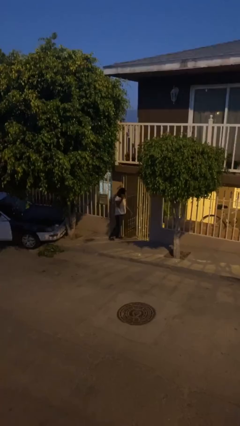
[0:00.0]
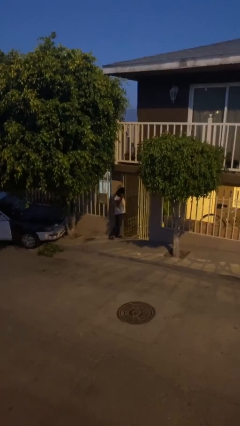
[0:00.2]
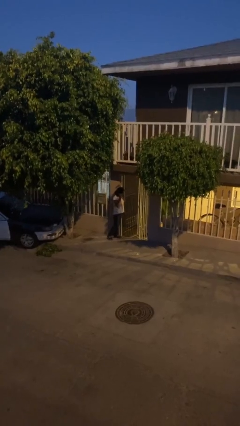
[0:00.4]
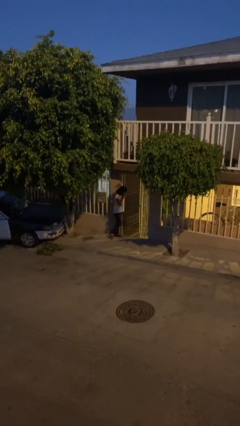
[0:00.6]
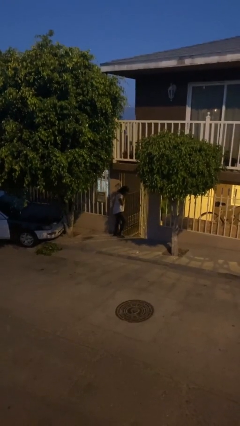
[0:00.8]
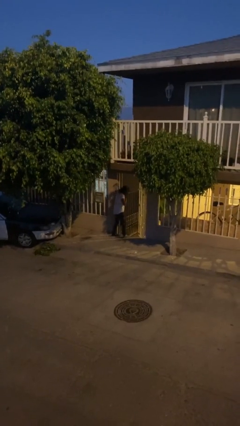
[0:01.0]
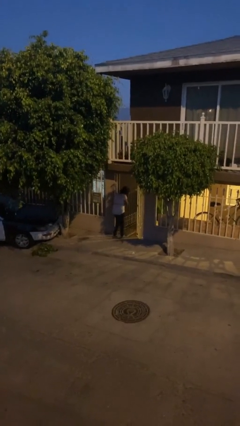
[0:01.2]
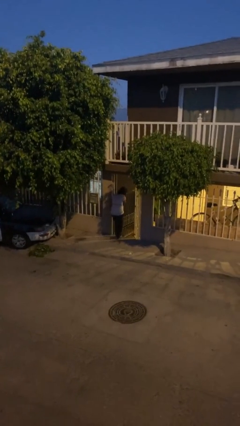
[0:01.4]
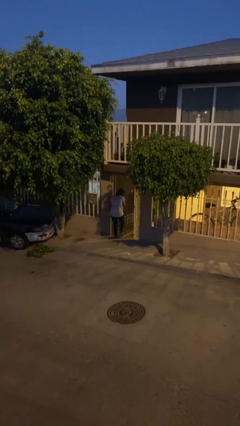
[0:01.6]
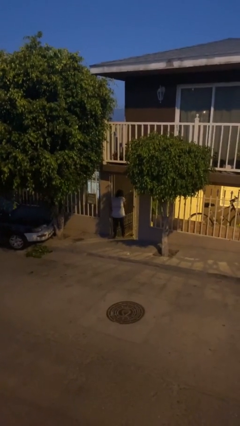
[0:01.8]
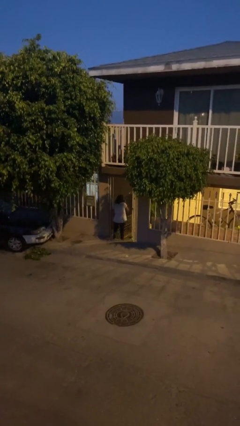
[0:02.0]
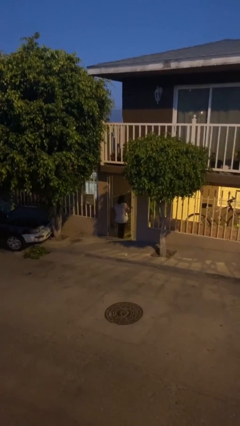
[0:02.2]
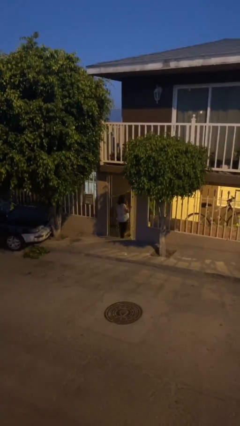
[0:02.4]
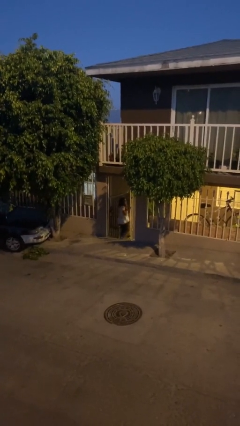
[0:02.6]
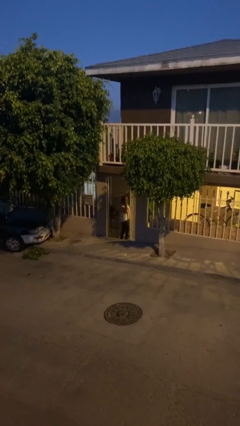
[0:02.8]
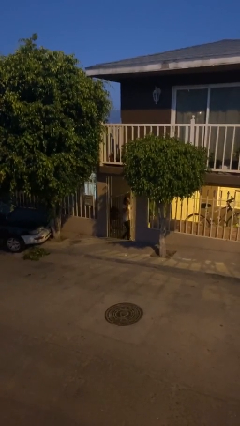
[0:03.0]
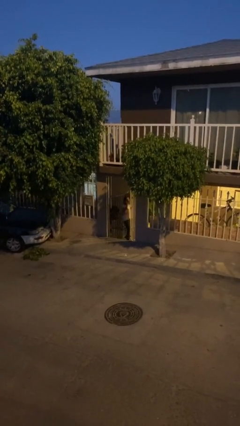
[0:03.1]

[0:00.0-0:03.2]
person exits scene through structure

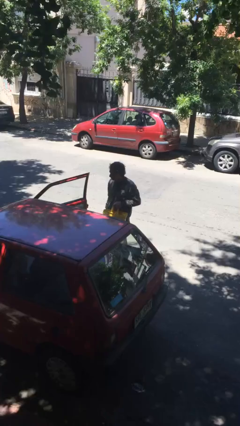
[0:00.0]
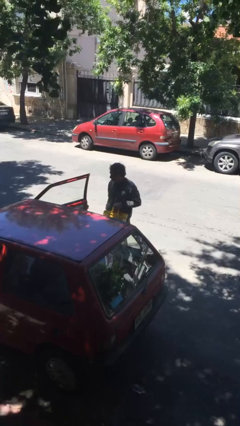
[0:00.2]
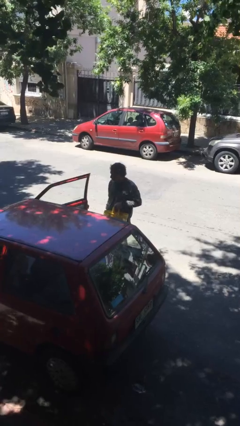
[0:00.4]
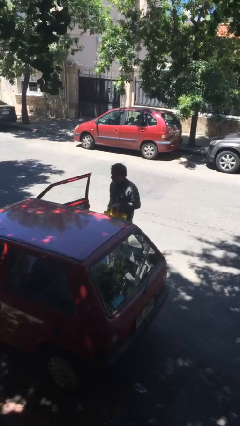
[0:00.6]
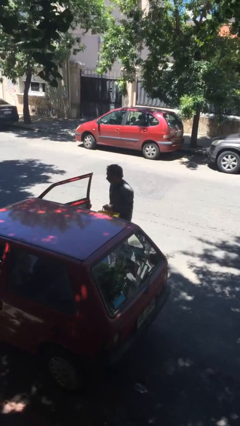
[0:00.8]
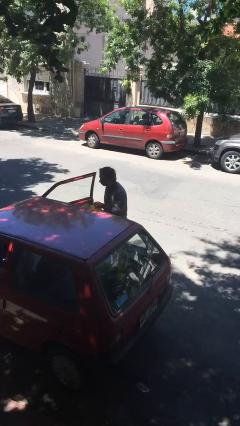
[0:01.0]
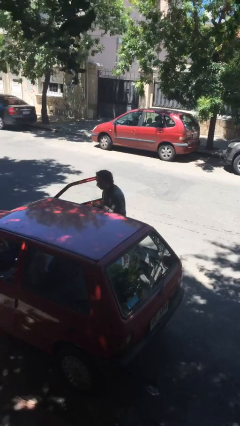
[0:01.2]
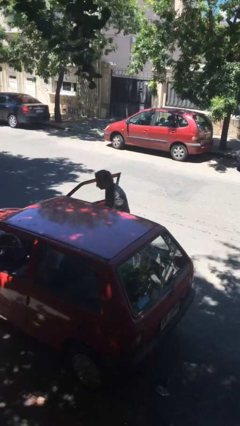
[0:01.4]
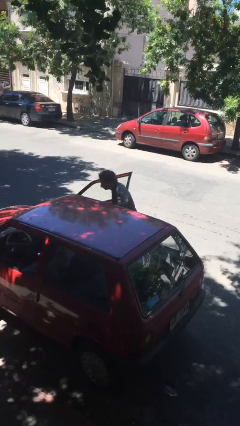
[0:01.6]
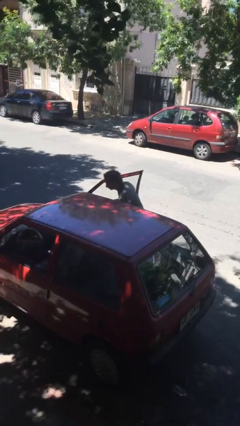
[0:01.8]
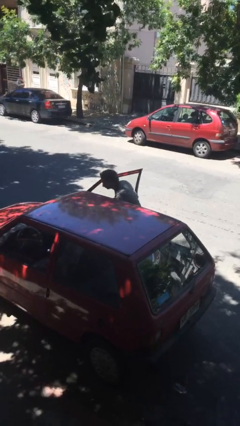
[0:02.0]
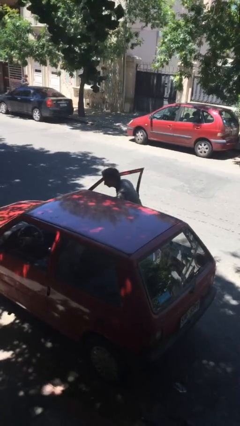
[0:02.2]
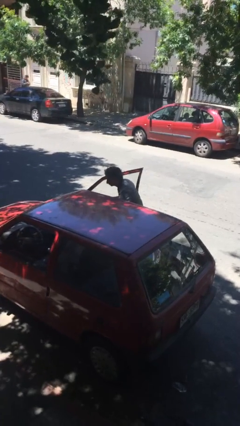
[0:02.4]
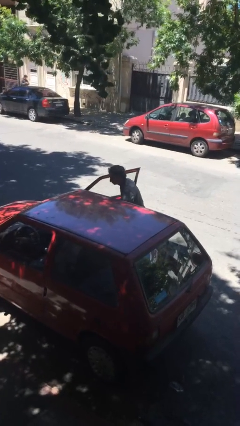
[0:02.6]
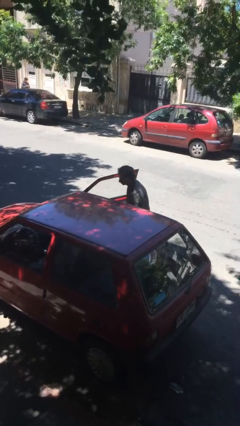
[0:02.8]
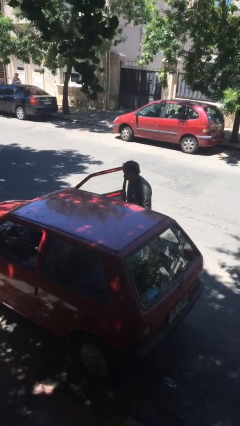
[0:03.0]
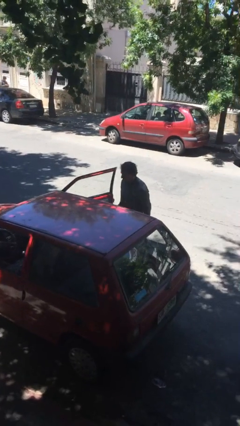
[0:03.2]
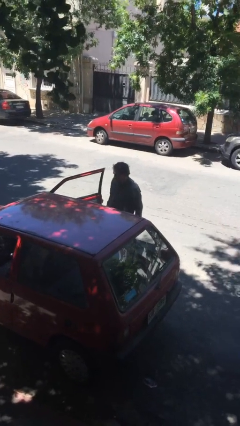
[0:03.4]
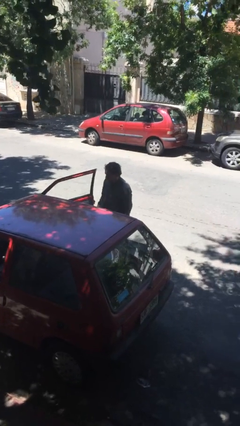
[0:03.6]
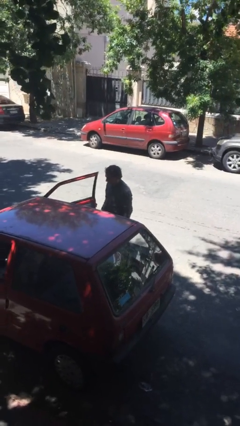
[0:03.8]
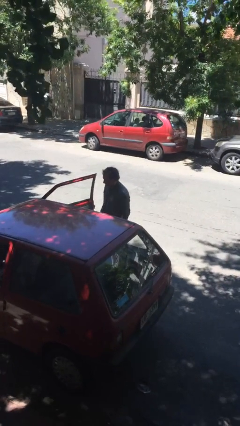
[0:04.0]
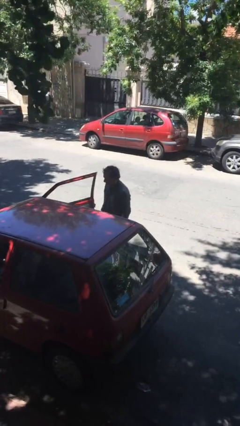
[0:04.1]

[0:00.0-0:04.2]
person loads car

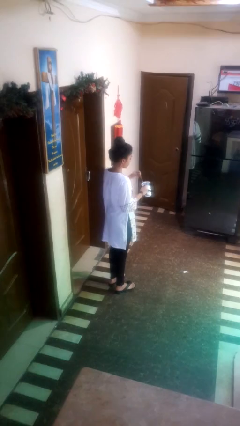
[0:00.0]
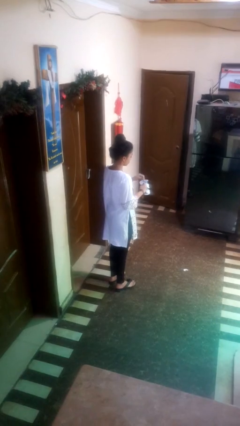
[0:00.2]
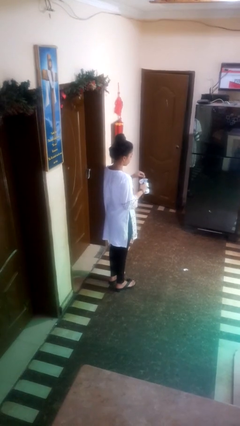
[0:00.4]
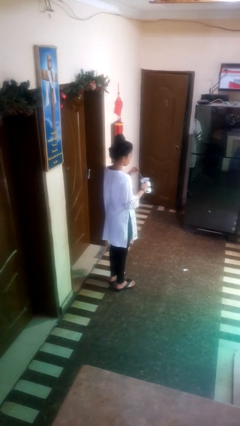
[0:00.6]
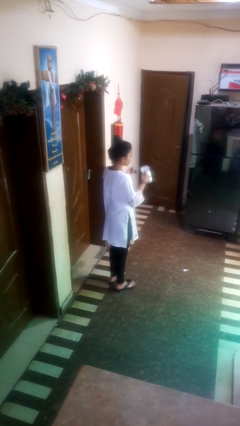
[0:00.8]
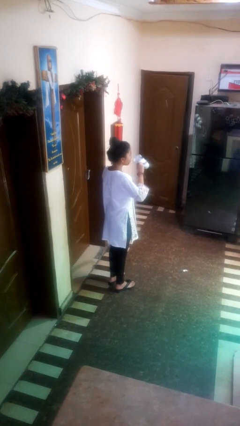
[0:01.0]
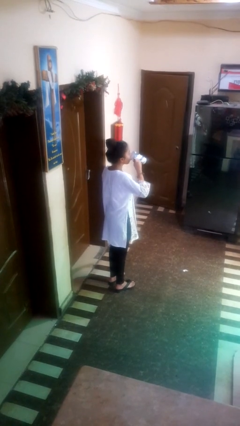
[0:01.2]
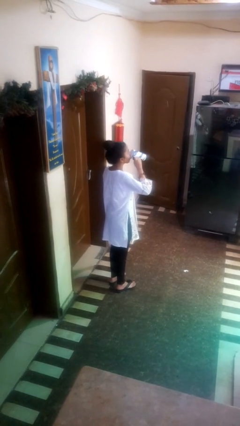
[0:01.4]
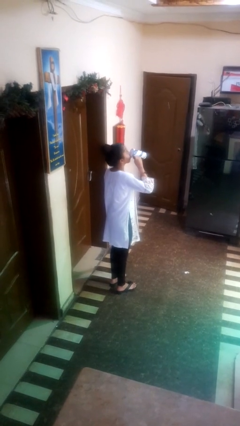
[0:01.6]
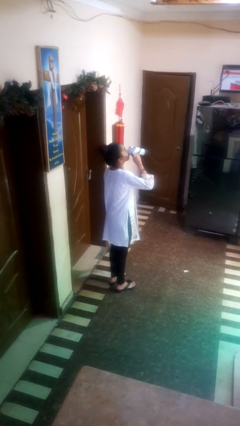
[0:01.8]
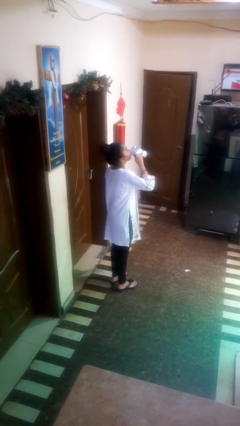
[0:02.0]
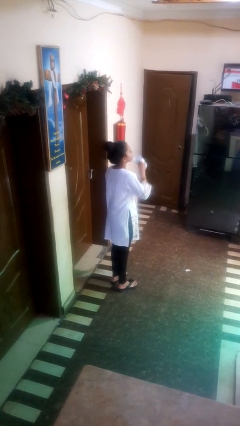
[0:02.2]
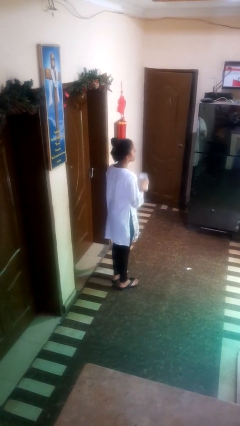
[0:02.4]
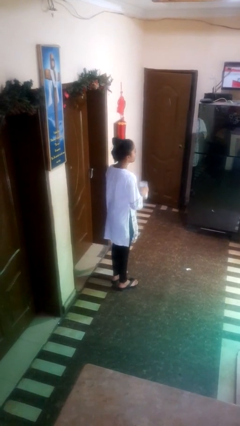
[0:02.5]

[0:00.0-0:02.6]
person drinks from mug

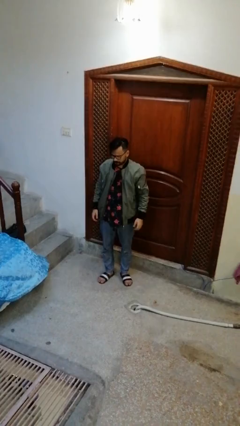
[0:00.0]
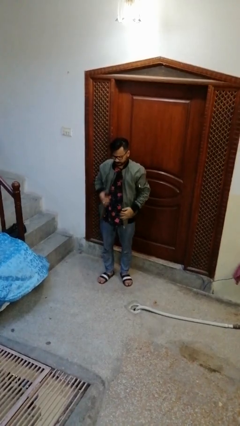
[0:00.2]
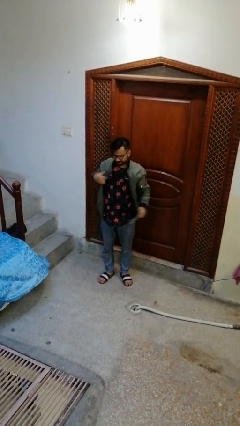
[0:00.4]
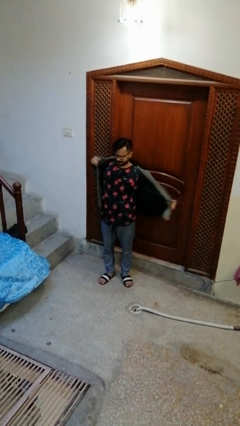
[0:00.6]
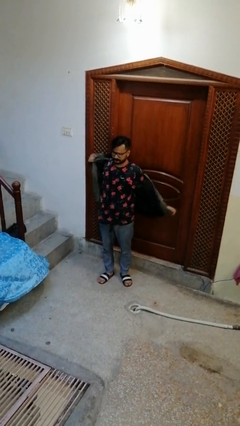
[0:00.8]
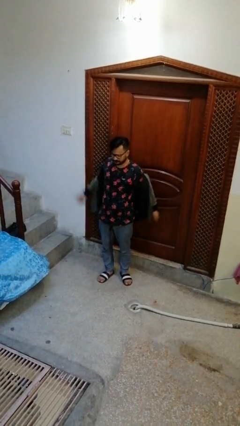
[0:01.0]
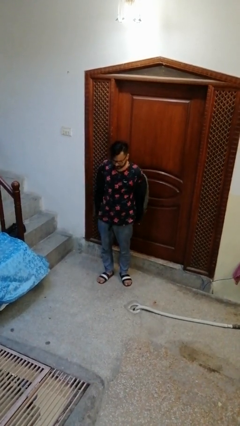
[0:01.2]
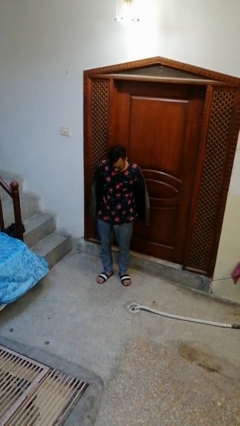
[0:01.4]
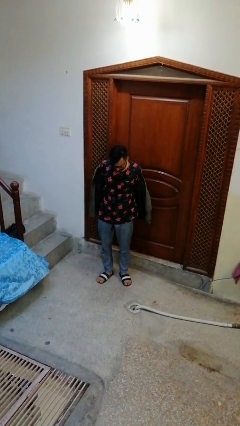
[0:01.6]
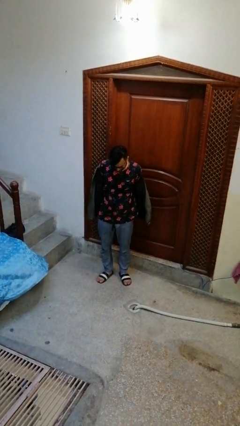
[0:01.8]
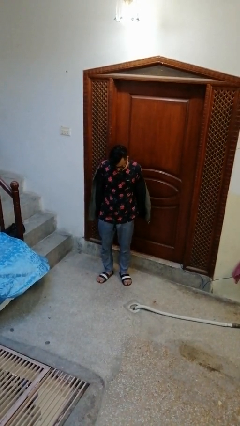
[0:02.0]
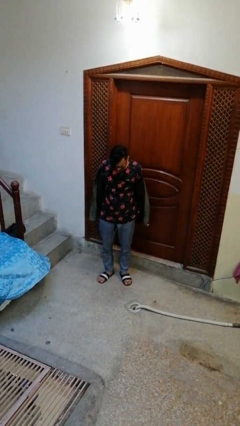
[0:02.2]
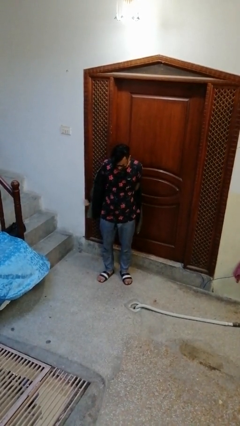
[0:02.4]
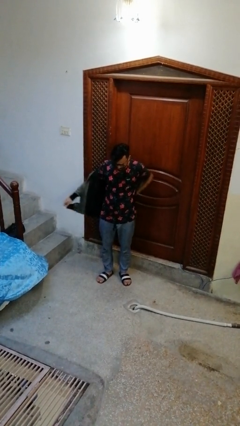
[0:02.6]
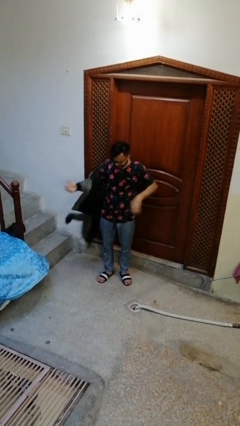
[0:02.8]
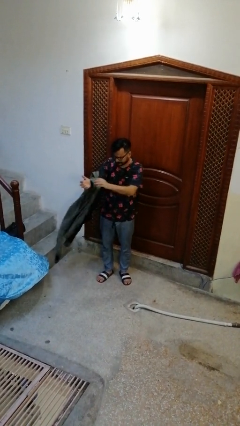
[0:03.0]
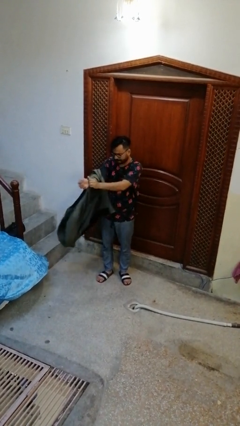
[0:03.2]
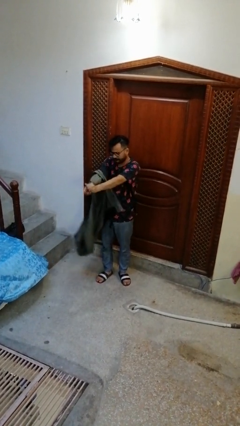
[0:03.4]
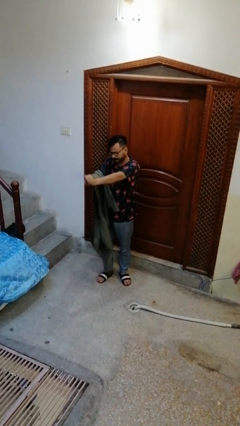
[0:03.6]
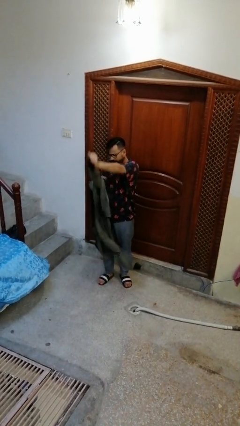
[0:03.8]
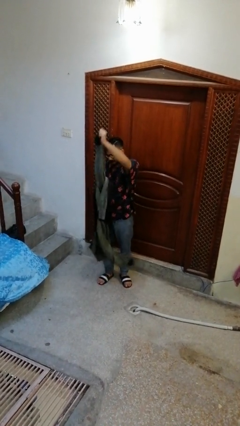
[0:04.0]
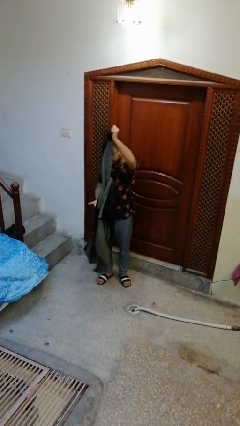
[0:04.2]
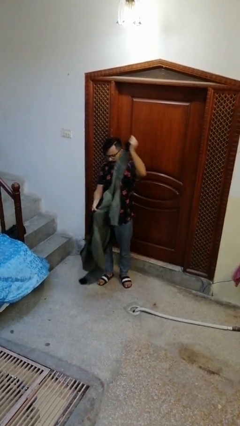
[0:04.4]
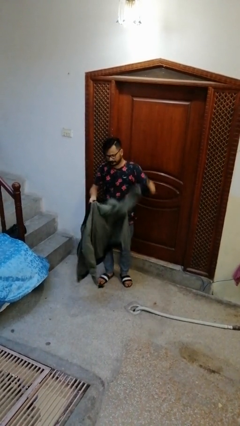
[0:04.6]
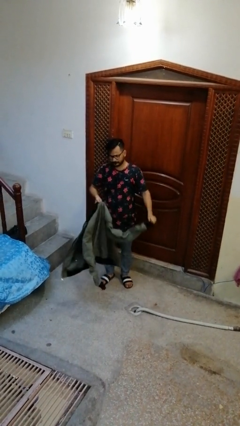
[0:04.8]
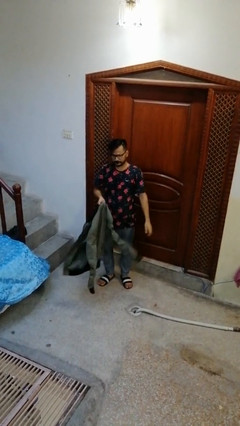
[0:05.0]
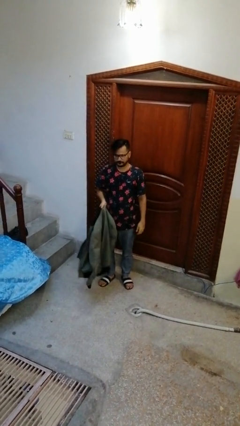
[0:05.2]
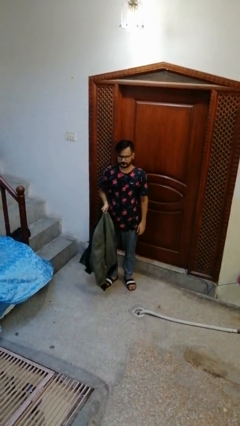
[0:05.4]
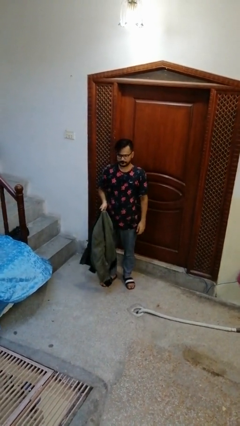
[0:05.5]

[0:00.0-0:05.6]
person takes off jacket

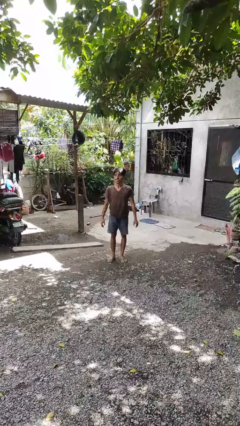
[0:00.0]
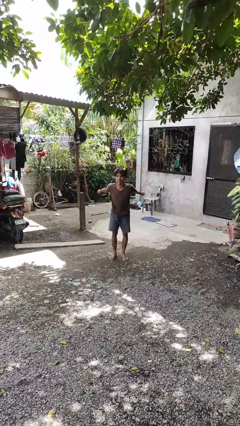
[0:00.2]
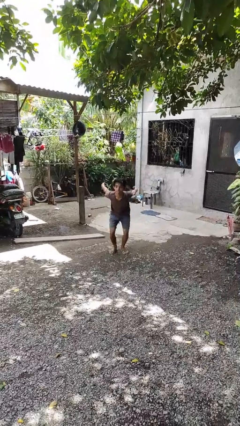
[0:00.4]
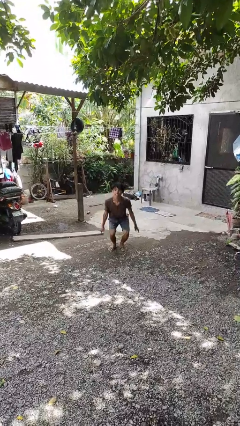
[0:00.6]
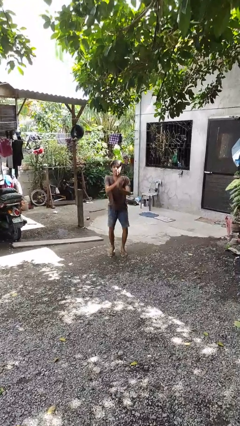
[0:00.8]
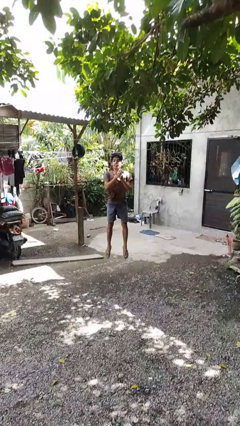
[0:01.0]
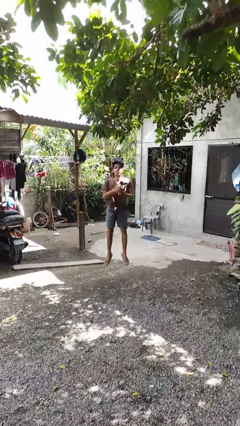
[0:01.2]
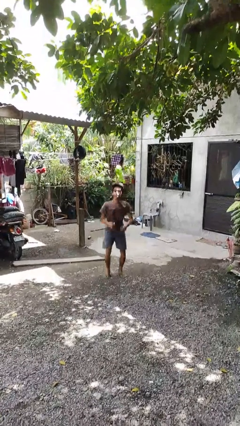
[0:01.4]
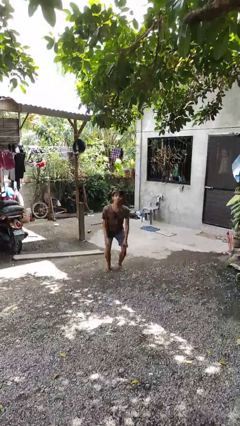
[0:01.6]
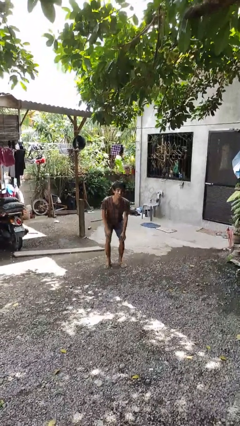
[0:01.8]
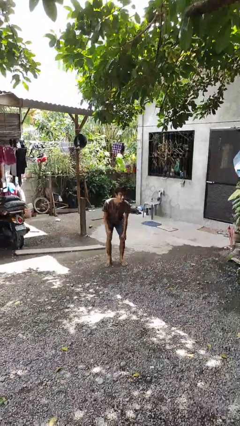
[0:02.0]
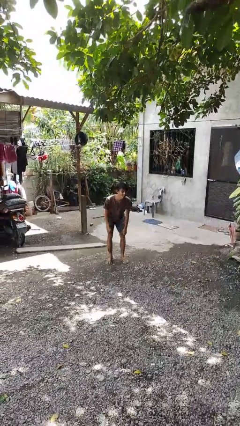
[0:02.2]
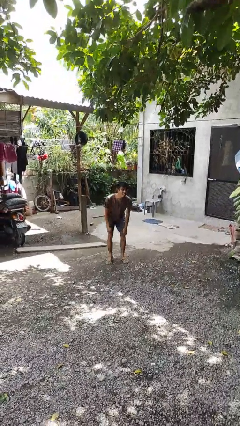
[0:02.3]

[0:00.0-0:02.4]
person jumps
